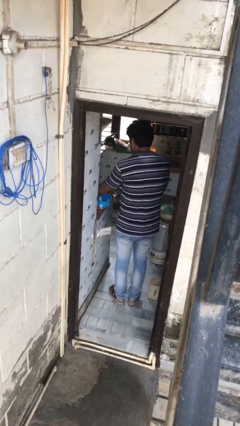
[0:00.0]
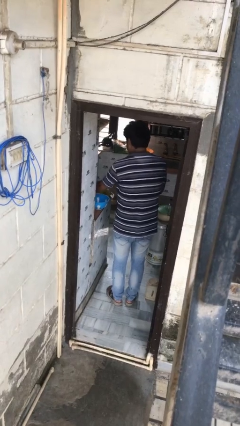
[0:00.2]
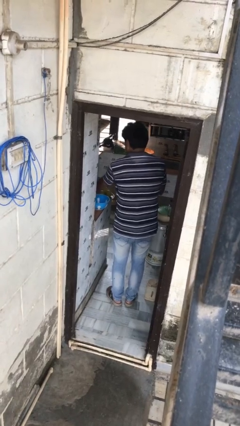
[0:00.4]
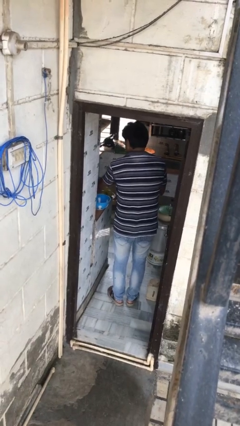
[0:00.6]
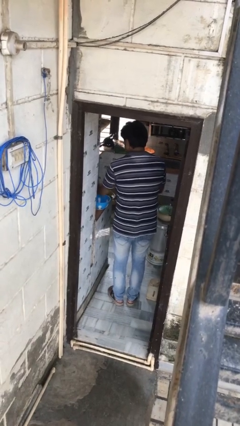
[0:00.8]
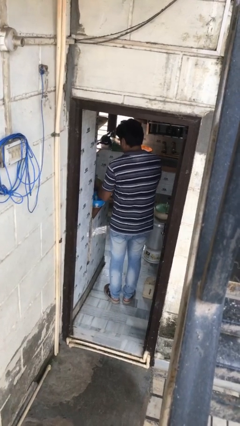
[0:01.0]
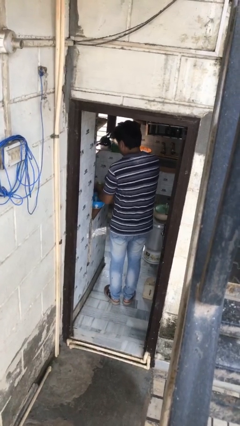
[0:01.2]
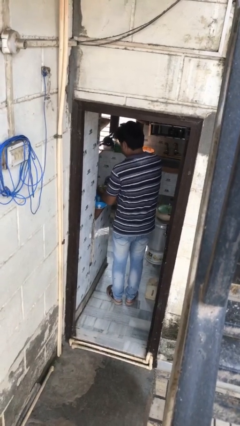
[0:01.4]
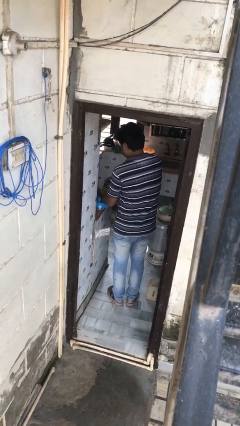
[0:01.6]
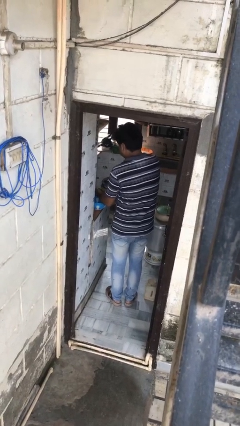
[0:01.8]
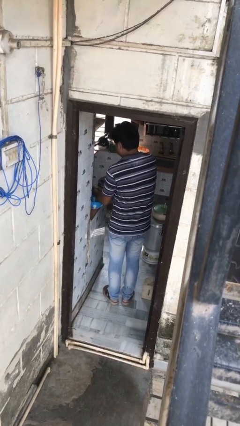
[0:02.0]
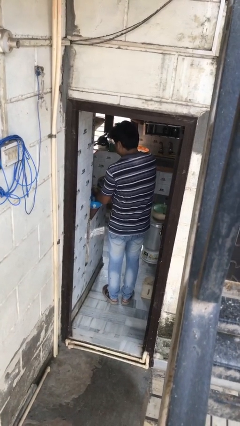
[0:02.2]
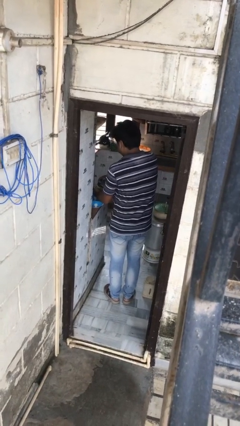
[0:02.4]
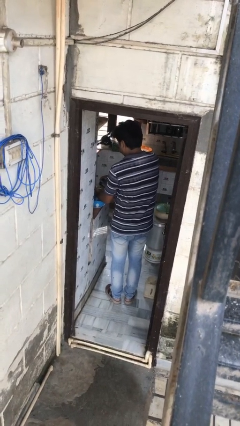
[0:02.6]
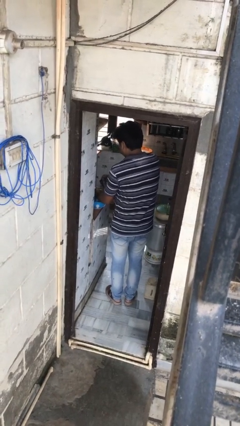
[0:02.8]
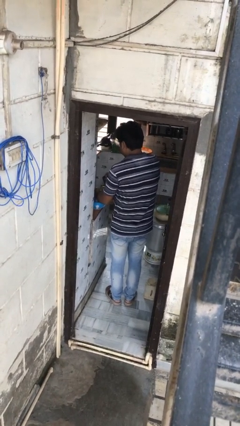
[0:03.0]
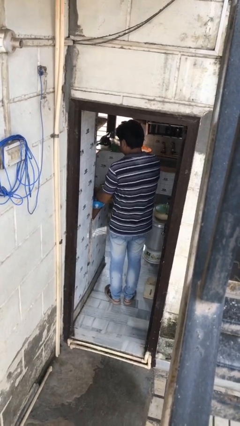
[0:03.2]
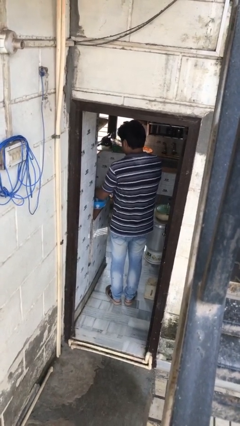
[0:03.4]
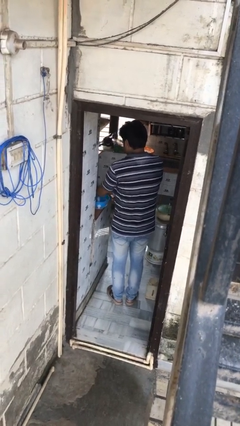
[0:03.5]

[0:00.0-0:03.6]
person washes dish

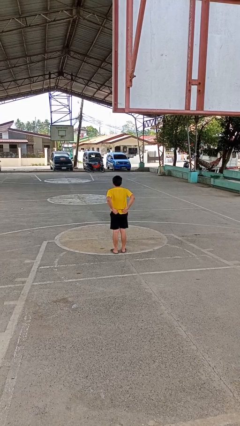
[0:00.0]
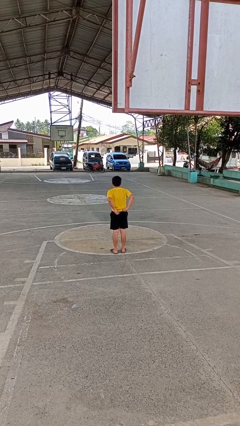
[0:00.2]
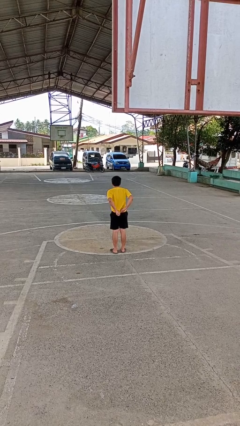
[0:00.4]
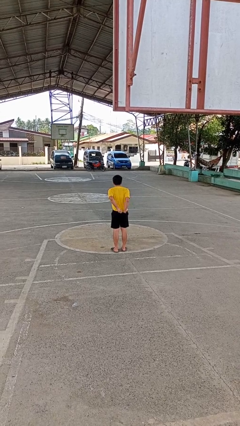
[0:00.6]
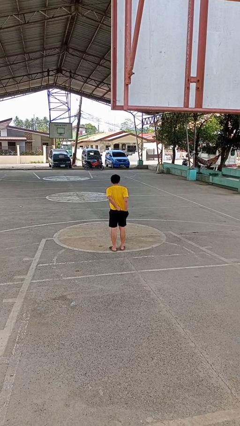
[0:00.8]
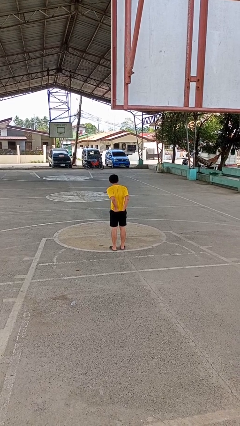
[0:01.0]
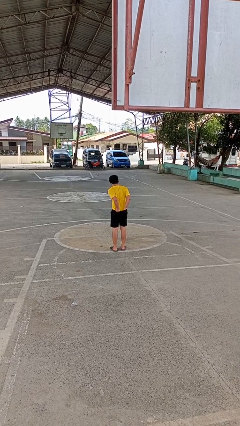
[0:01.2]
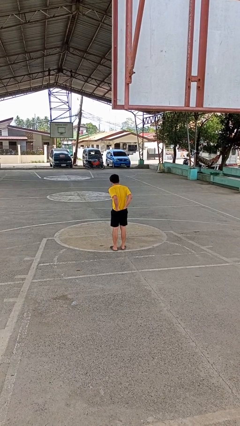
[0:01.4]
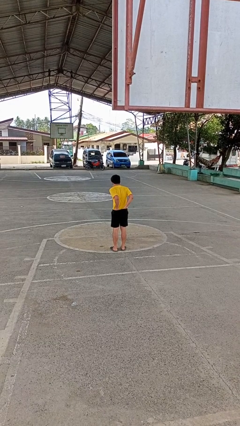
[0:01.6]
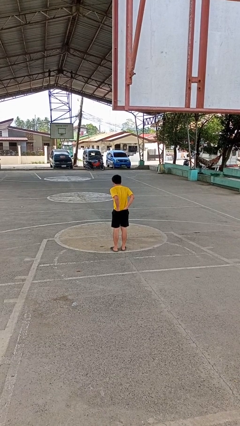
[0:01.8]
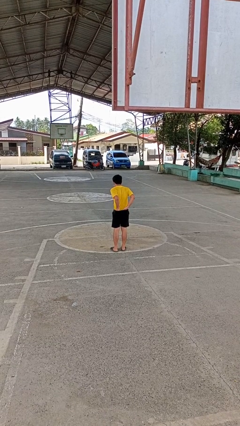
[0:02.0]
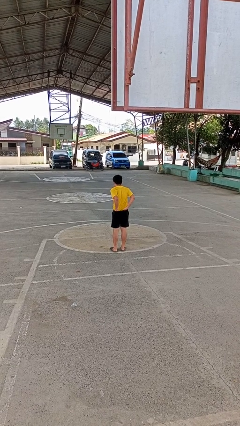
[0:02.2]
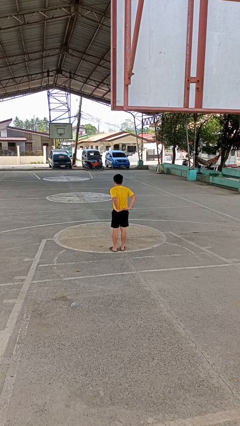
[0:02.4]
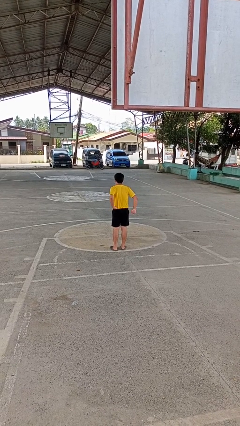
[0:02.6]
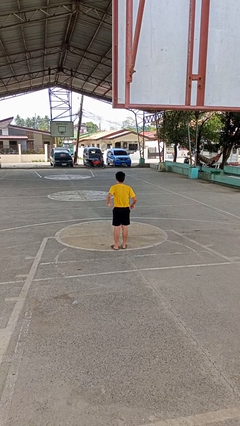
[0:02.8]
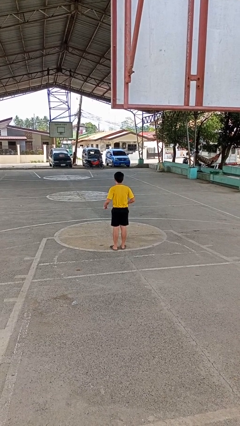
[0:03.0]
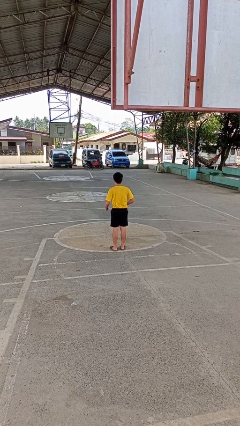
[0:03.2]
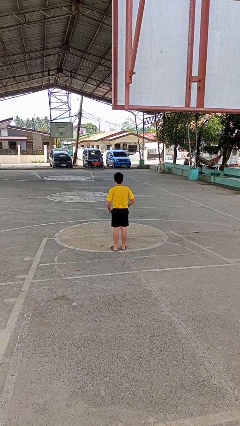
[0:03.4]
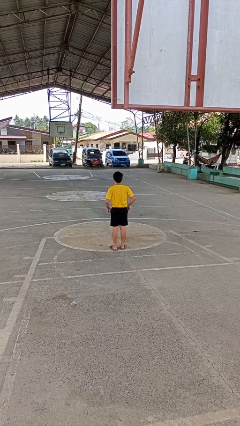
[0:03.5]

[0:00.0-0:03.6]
person tucks in shirt

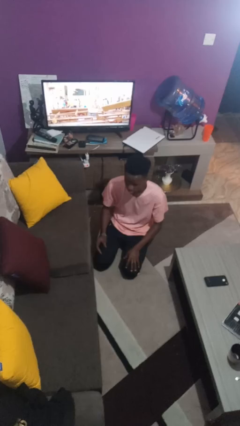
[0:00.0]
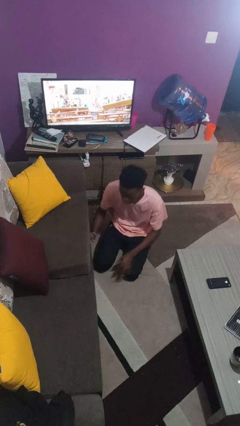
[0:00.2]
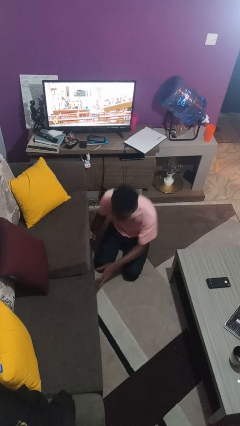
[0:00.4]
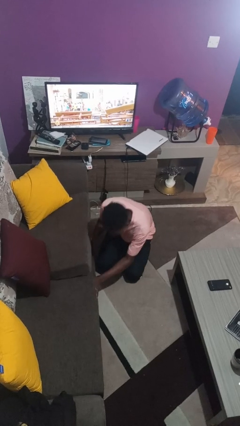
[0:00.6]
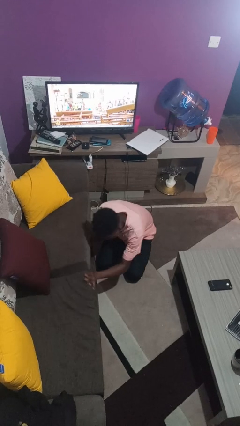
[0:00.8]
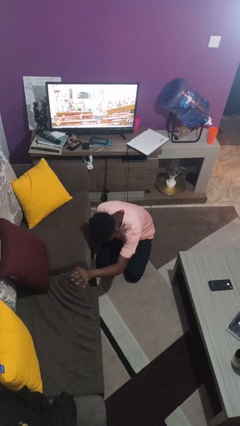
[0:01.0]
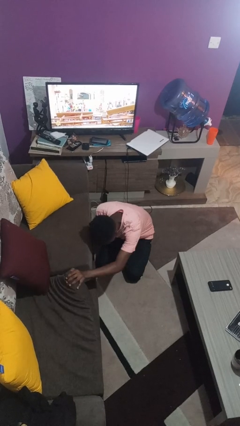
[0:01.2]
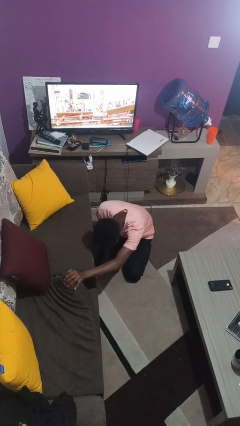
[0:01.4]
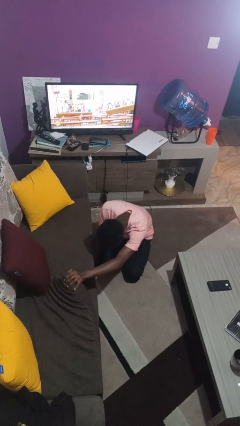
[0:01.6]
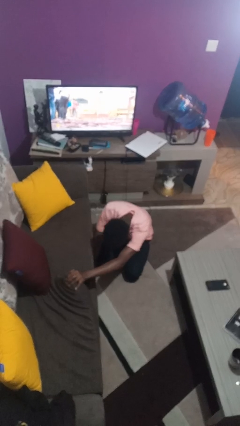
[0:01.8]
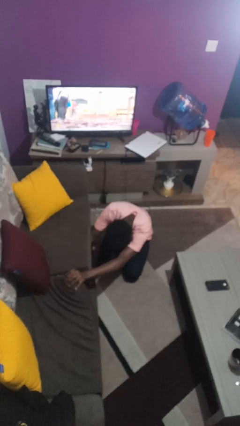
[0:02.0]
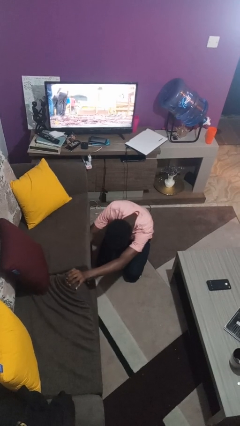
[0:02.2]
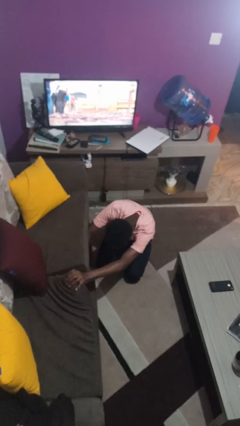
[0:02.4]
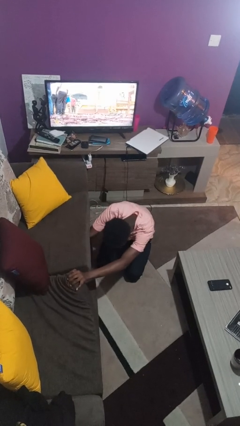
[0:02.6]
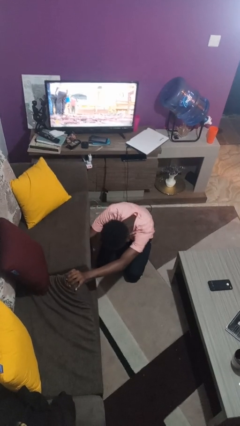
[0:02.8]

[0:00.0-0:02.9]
person searches under couch

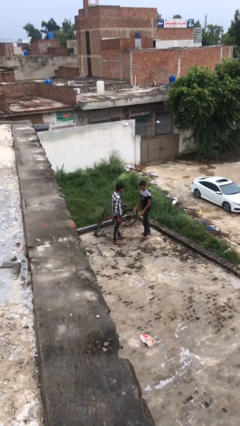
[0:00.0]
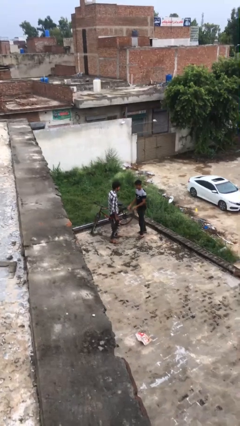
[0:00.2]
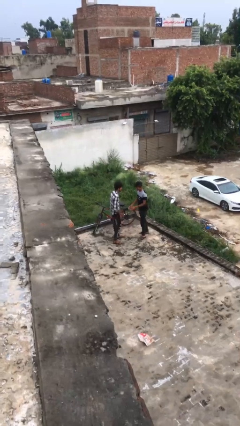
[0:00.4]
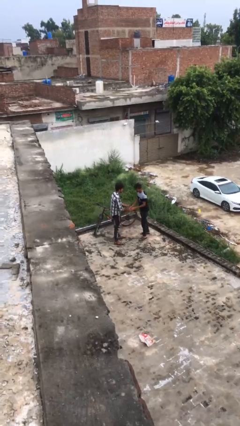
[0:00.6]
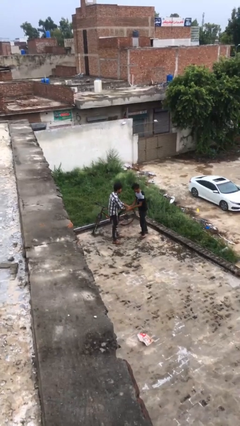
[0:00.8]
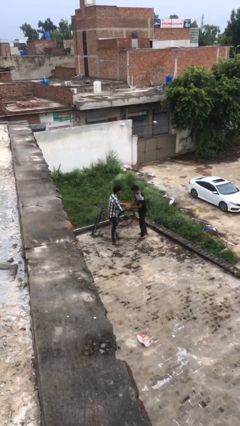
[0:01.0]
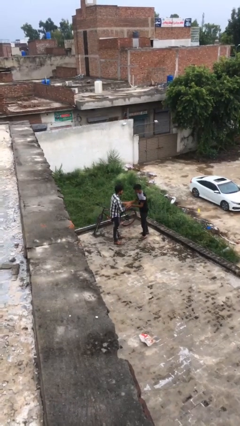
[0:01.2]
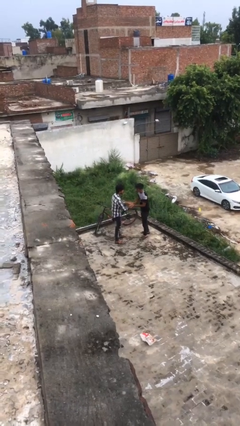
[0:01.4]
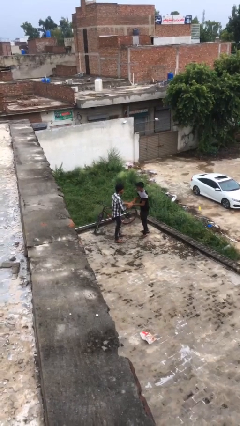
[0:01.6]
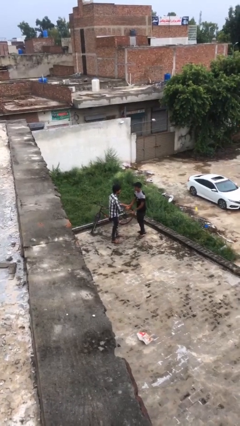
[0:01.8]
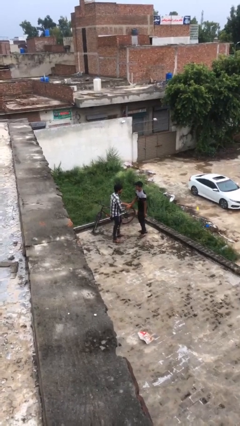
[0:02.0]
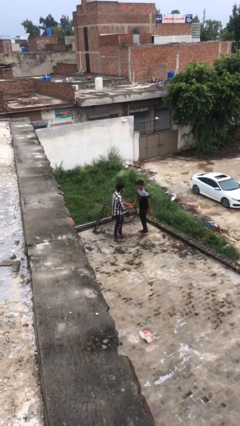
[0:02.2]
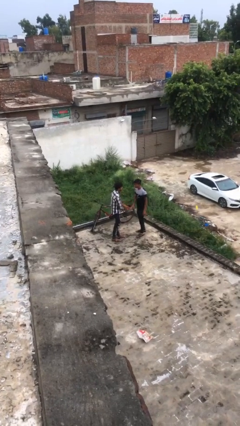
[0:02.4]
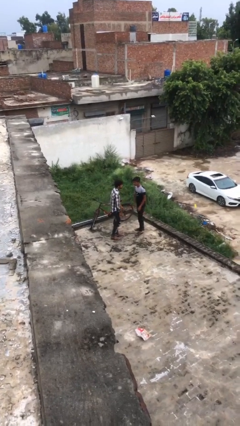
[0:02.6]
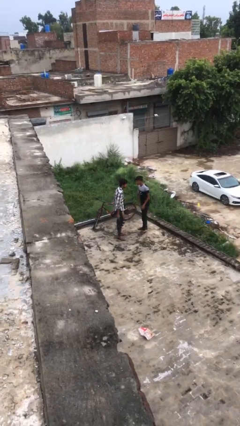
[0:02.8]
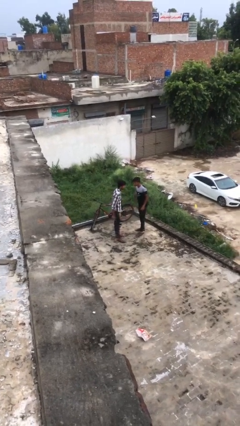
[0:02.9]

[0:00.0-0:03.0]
person shakes hand

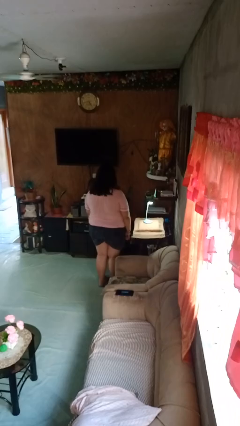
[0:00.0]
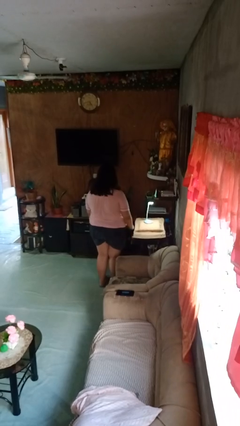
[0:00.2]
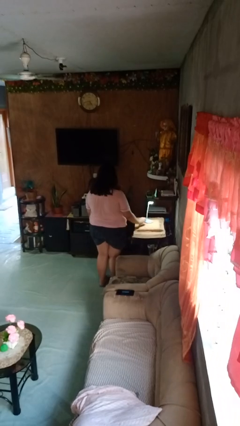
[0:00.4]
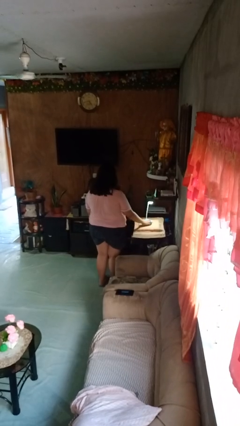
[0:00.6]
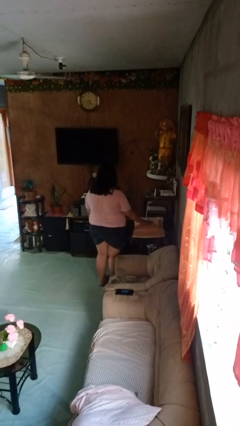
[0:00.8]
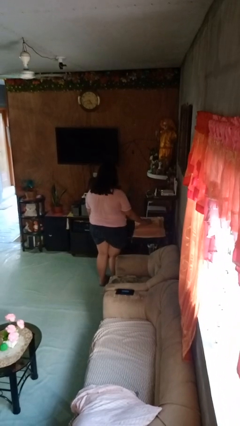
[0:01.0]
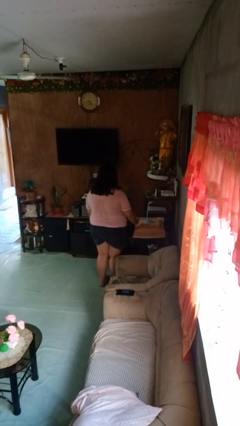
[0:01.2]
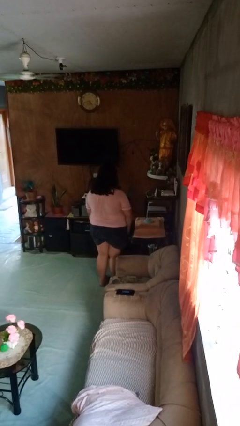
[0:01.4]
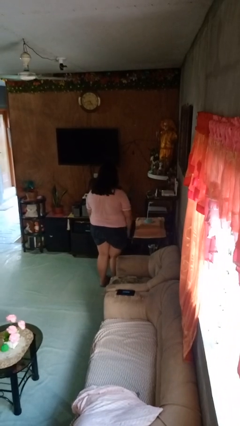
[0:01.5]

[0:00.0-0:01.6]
person turns off lamp

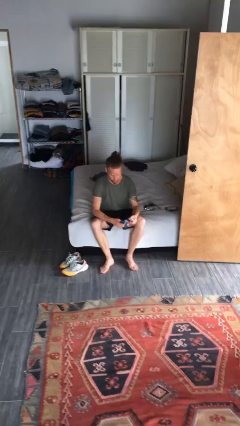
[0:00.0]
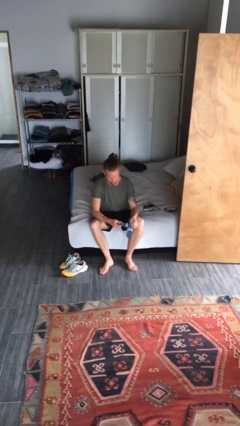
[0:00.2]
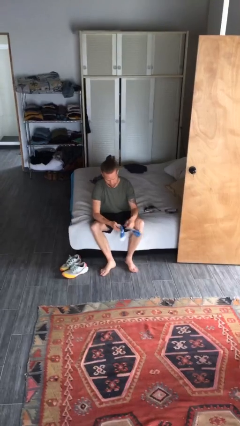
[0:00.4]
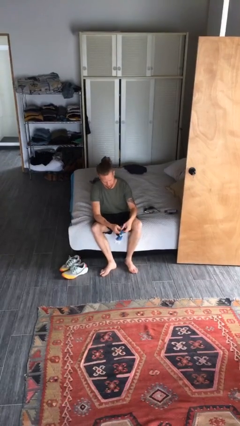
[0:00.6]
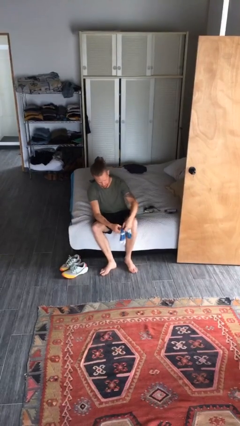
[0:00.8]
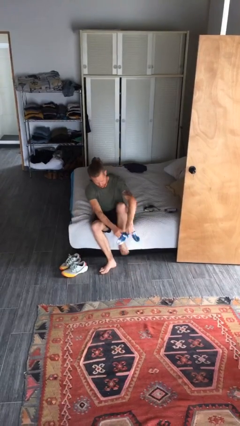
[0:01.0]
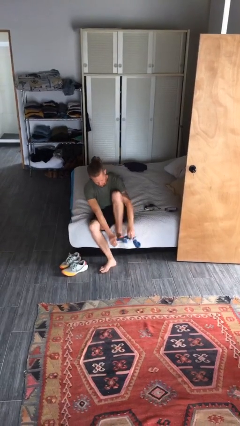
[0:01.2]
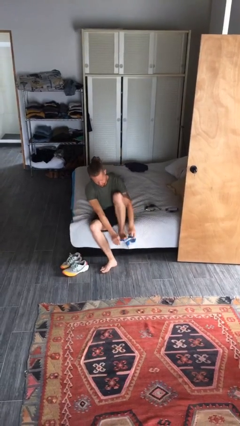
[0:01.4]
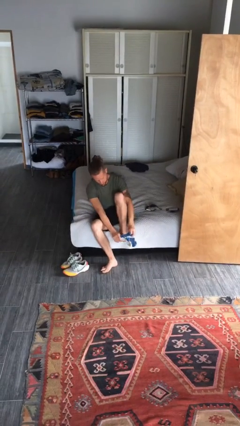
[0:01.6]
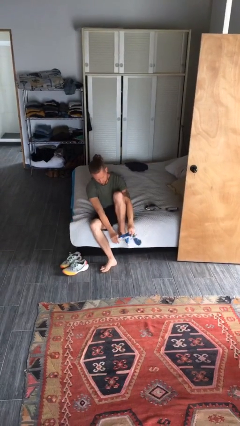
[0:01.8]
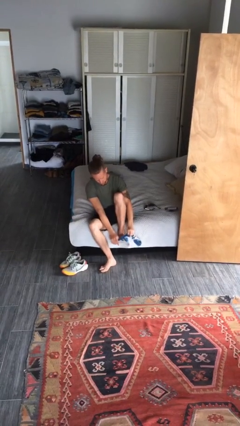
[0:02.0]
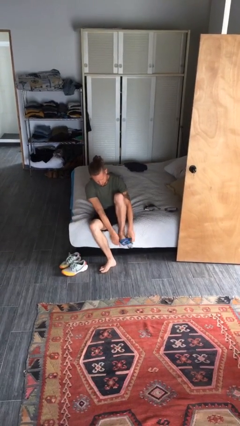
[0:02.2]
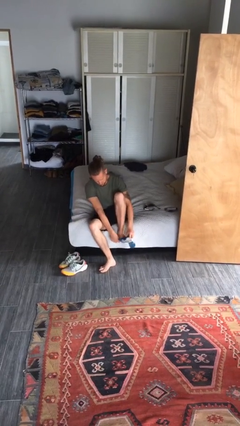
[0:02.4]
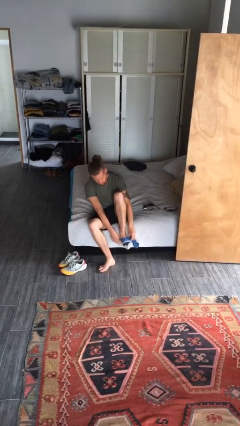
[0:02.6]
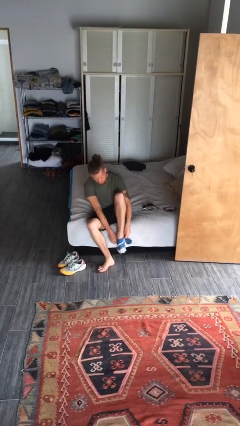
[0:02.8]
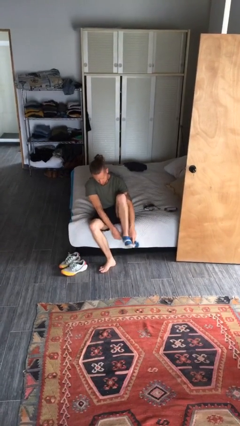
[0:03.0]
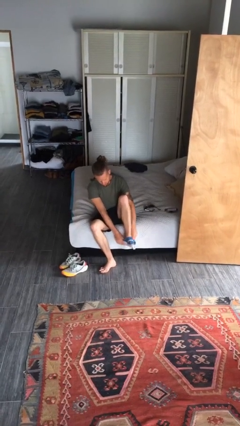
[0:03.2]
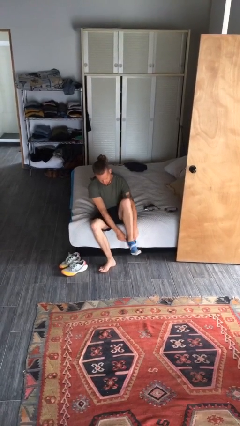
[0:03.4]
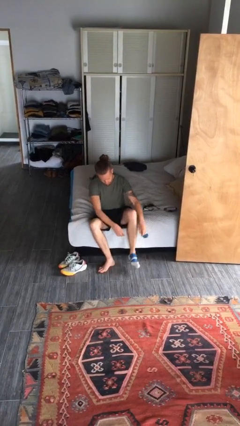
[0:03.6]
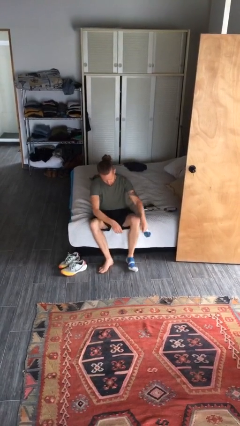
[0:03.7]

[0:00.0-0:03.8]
person puts on socks
